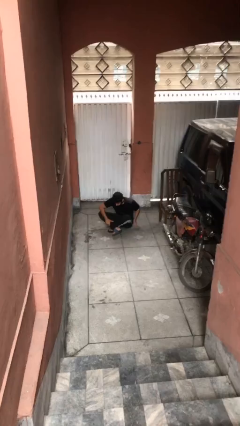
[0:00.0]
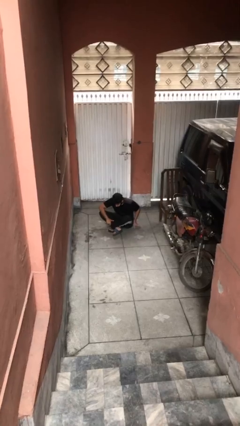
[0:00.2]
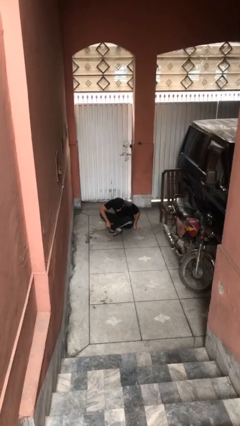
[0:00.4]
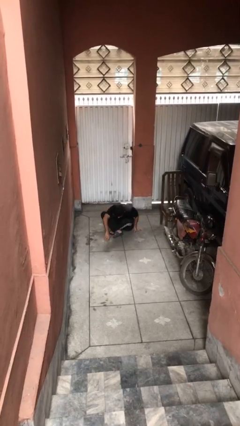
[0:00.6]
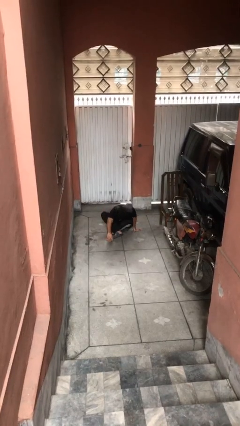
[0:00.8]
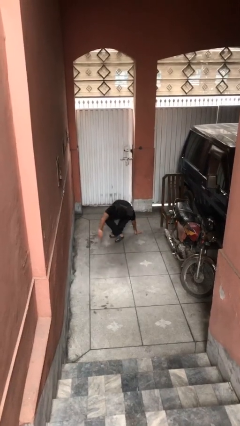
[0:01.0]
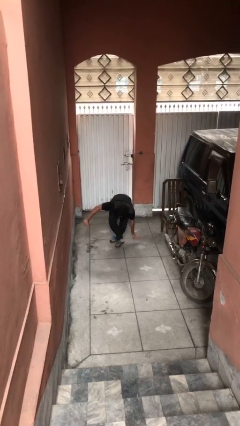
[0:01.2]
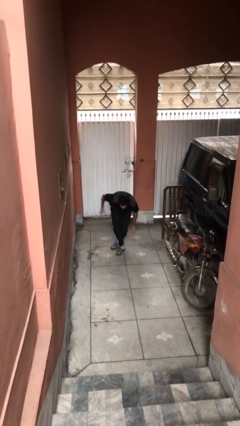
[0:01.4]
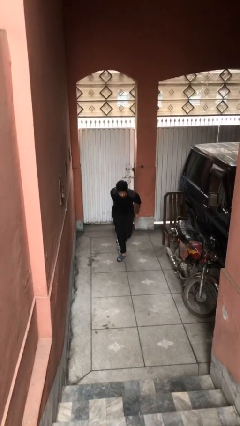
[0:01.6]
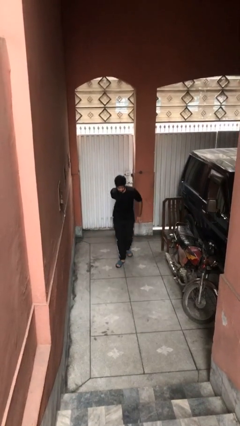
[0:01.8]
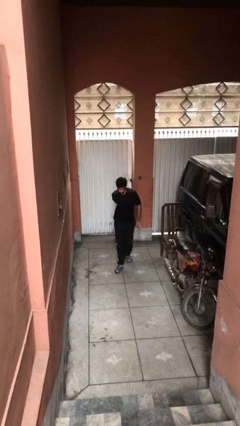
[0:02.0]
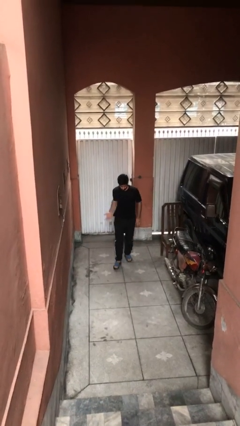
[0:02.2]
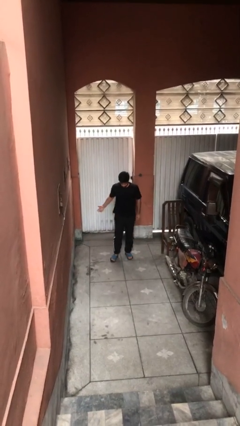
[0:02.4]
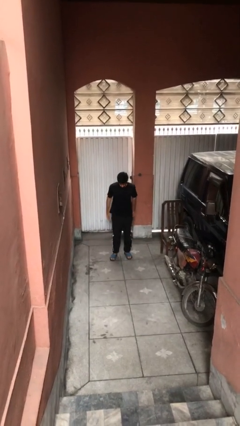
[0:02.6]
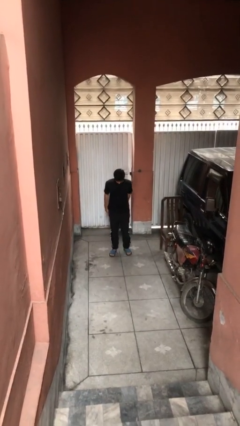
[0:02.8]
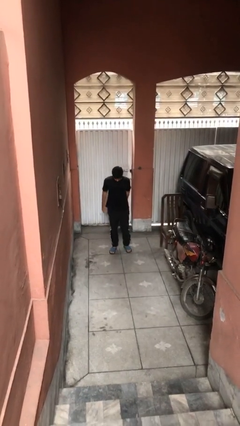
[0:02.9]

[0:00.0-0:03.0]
person stands up

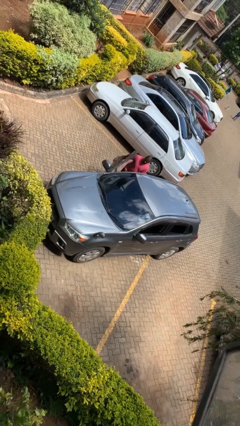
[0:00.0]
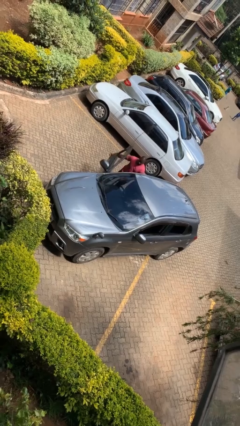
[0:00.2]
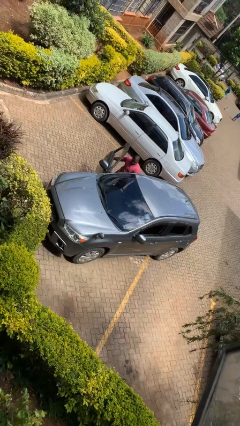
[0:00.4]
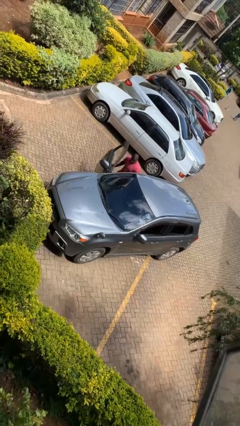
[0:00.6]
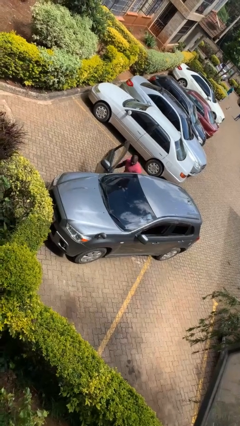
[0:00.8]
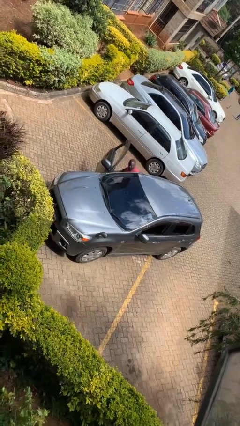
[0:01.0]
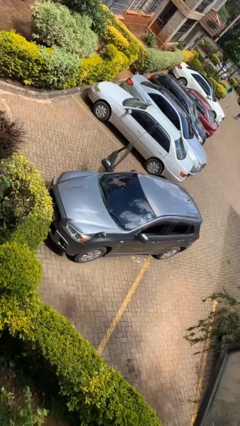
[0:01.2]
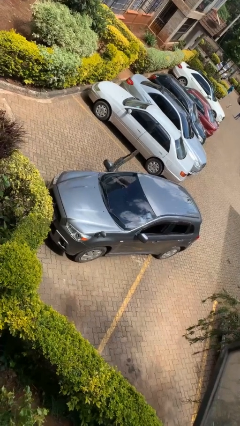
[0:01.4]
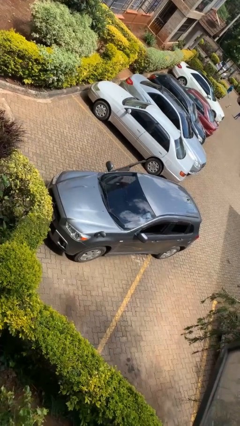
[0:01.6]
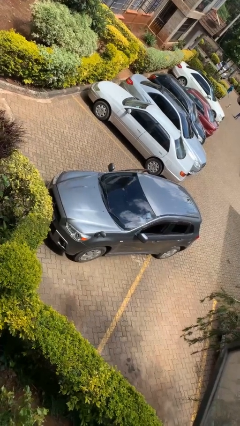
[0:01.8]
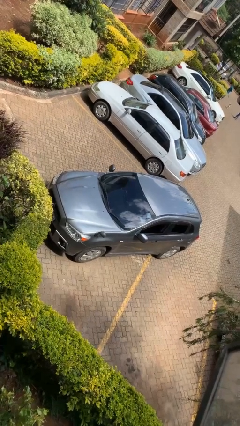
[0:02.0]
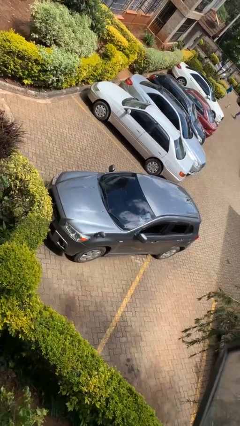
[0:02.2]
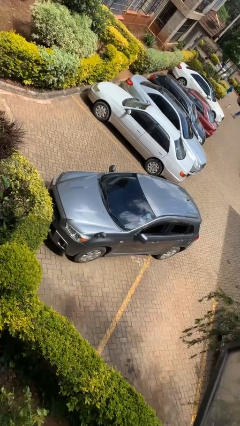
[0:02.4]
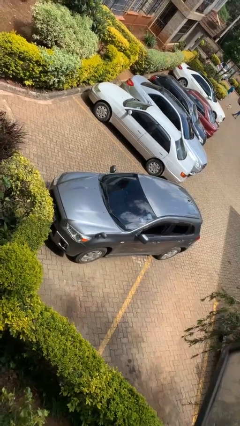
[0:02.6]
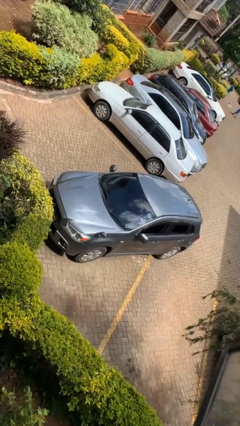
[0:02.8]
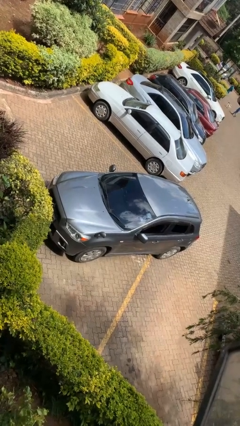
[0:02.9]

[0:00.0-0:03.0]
car picks up person

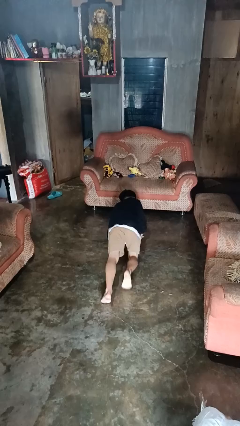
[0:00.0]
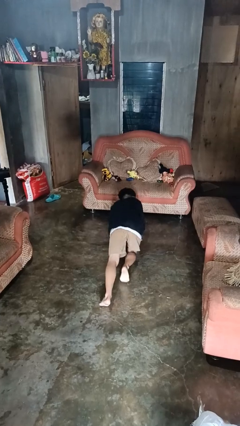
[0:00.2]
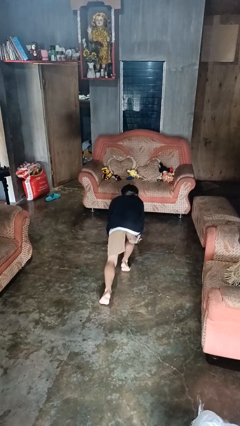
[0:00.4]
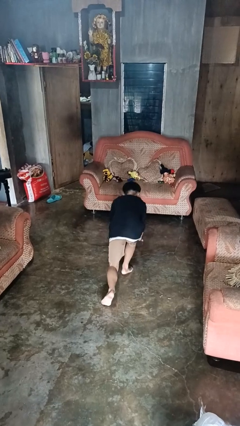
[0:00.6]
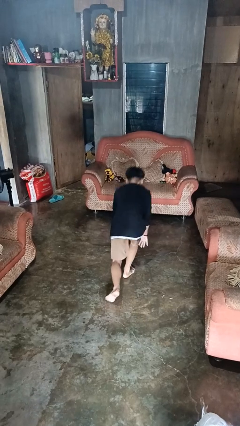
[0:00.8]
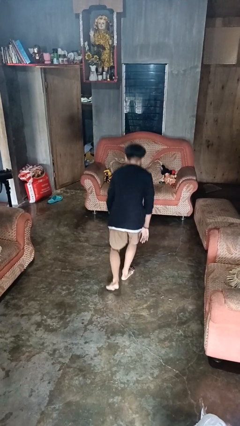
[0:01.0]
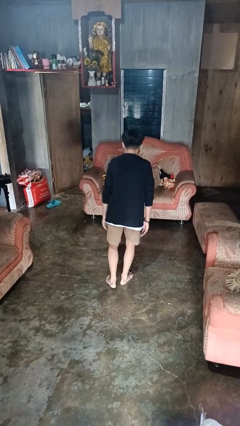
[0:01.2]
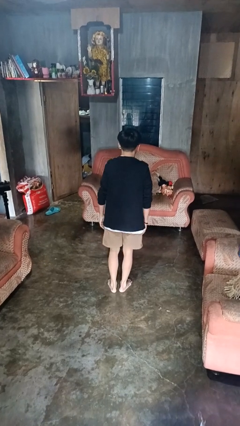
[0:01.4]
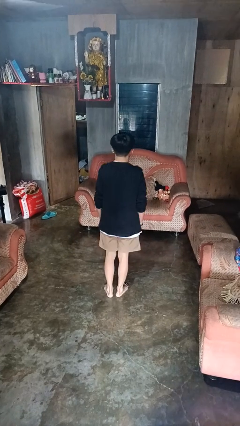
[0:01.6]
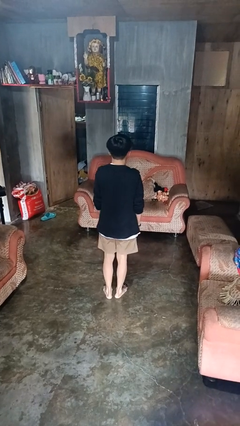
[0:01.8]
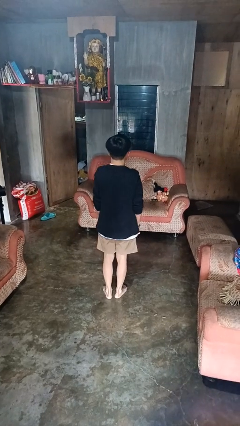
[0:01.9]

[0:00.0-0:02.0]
person stands up from floor

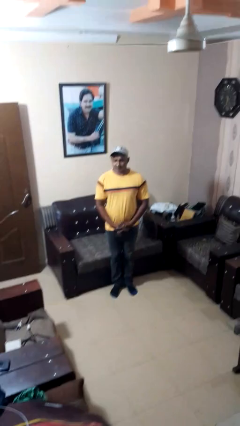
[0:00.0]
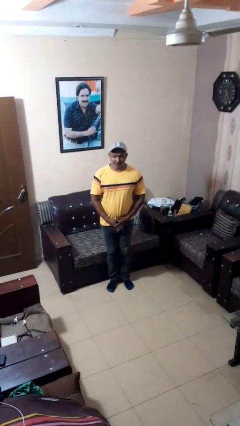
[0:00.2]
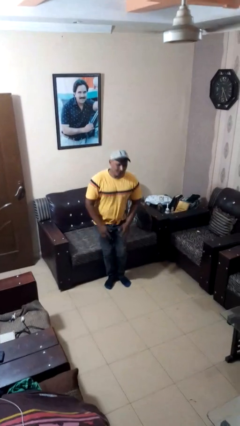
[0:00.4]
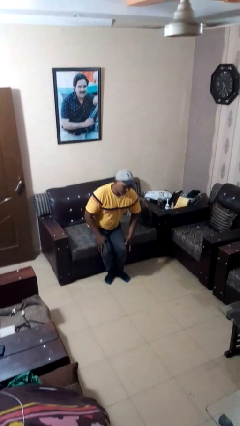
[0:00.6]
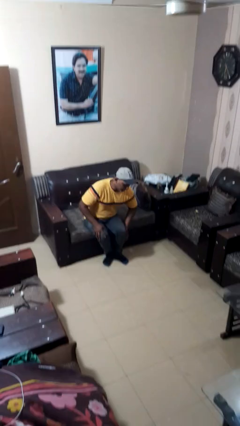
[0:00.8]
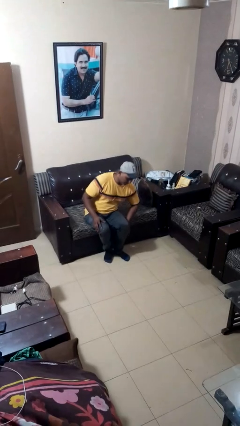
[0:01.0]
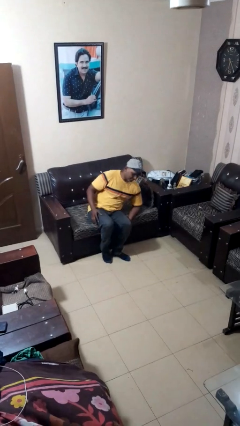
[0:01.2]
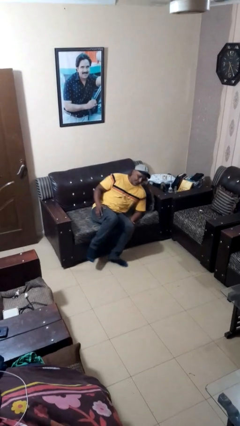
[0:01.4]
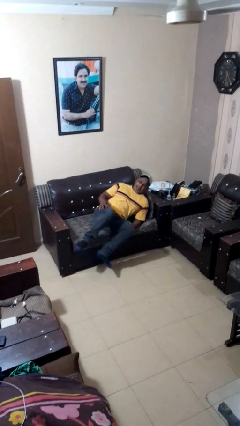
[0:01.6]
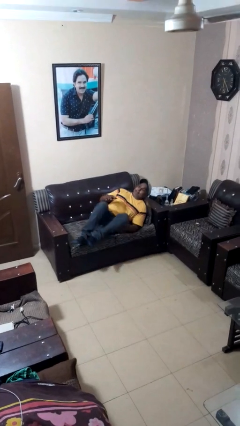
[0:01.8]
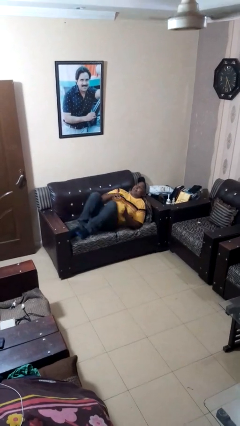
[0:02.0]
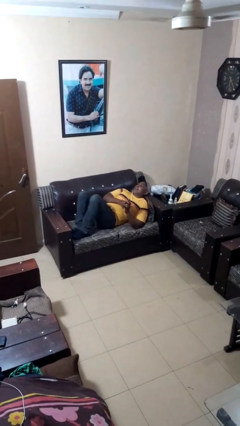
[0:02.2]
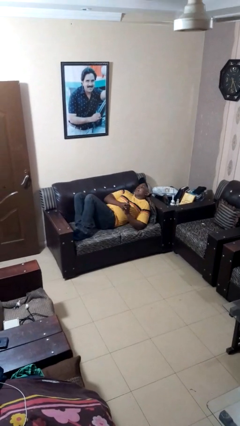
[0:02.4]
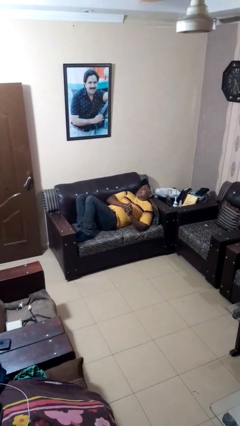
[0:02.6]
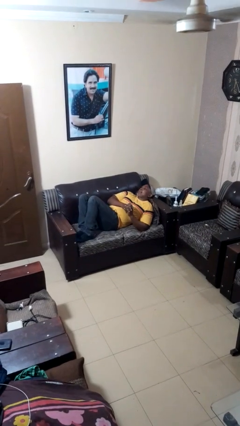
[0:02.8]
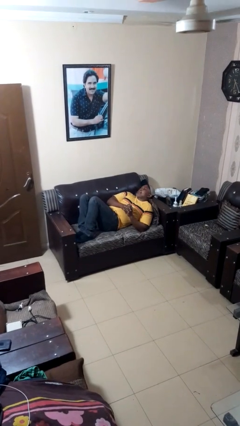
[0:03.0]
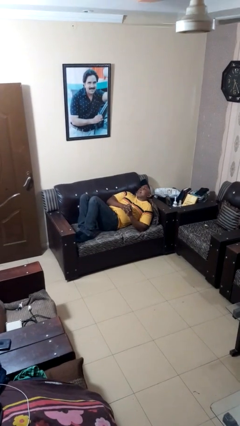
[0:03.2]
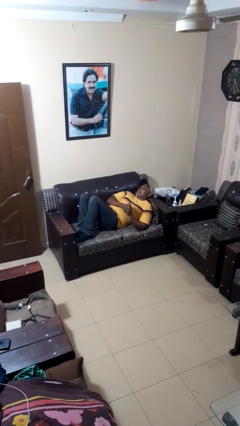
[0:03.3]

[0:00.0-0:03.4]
person lies down on couch

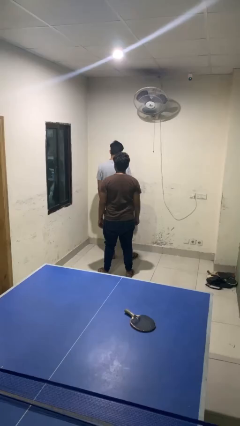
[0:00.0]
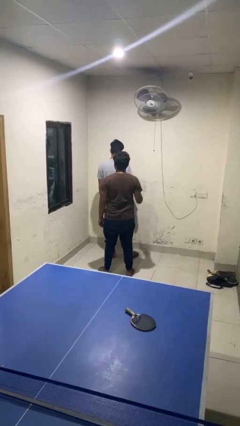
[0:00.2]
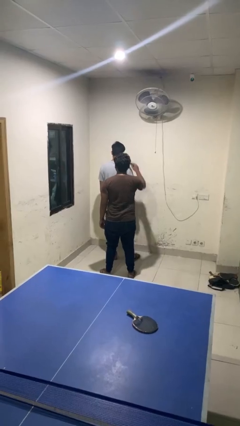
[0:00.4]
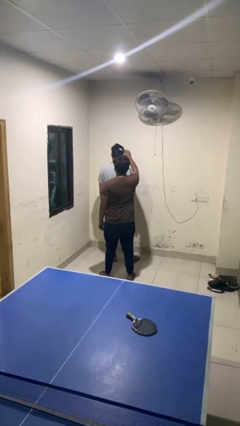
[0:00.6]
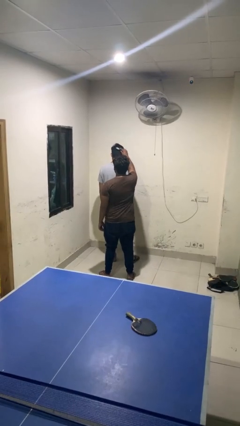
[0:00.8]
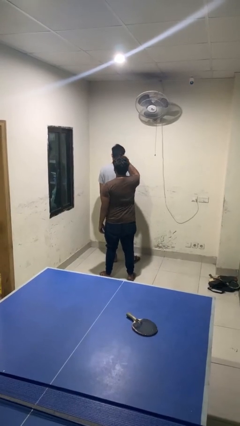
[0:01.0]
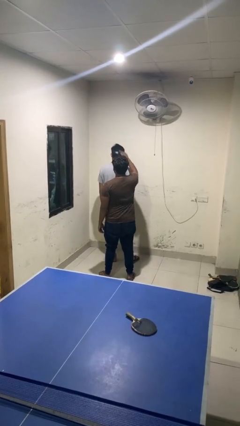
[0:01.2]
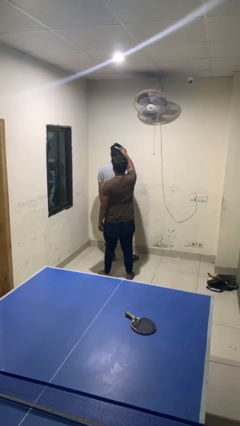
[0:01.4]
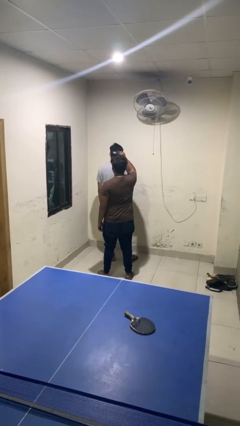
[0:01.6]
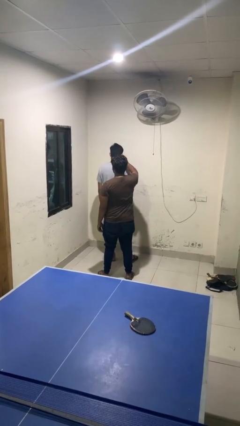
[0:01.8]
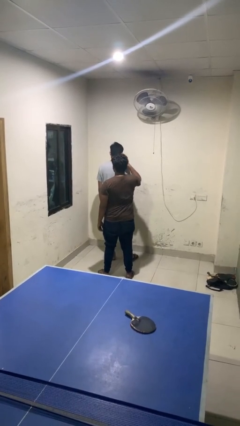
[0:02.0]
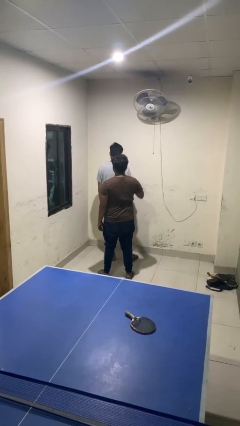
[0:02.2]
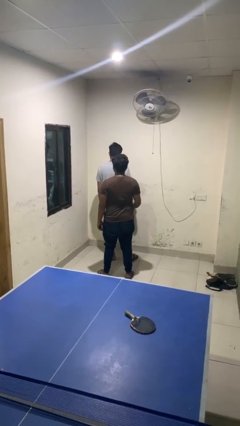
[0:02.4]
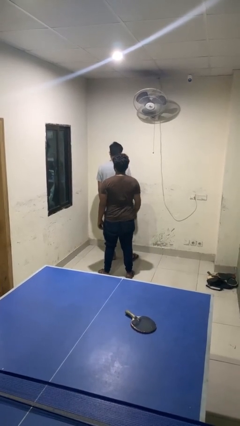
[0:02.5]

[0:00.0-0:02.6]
person brushes hair of person

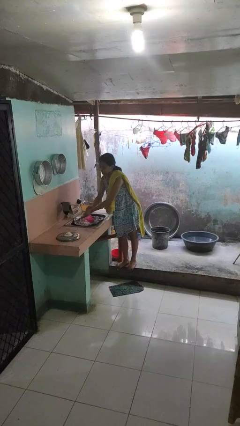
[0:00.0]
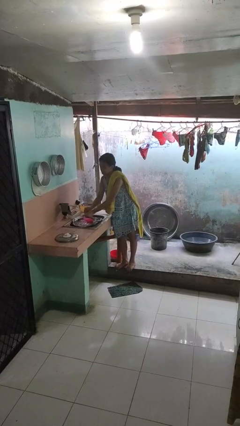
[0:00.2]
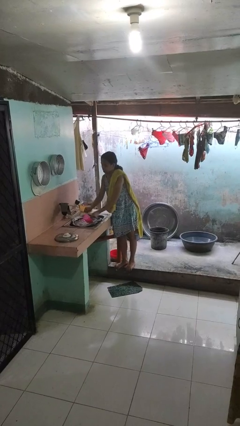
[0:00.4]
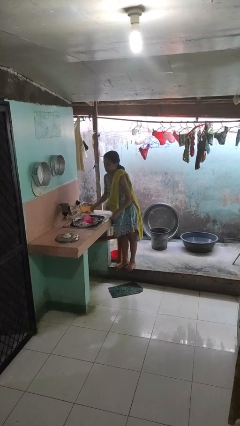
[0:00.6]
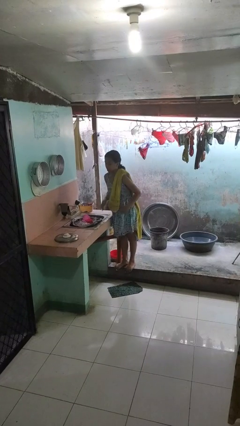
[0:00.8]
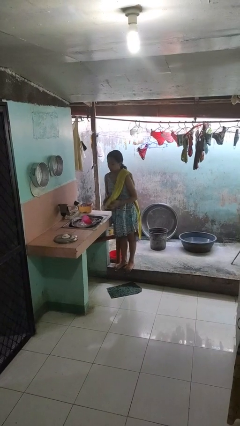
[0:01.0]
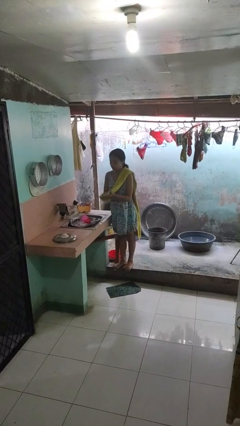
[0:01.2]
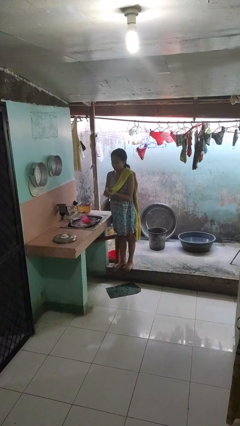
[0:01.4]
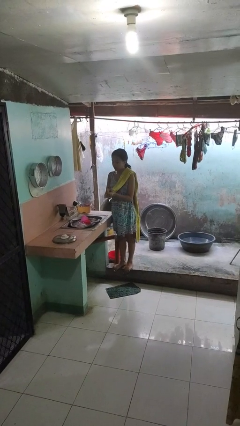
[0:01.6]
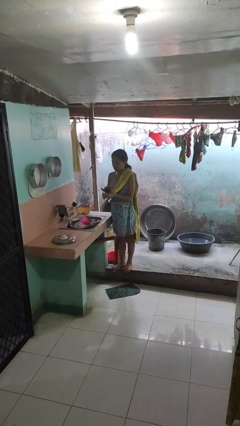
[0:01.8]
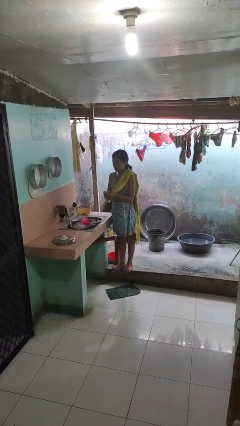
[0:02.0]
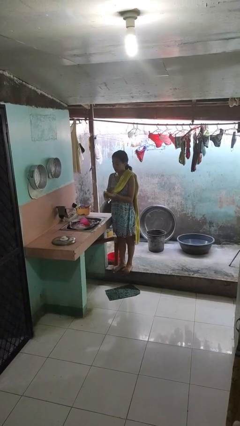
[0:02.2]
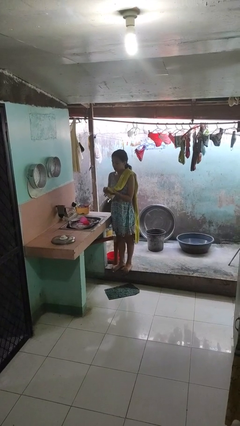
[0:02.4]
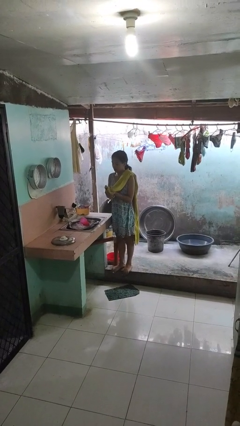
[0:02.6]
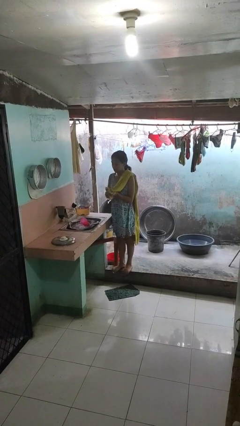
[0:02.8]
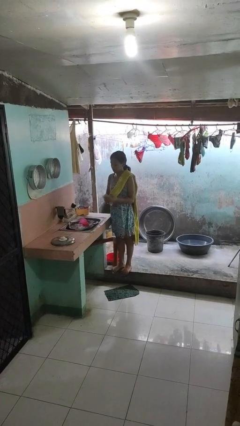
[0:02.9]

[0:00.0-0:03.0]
person dries hands with towel

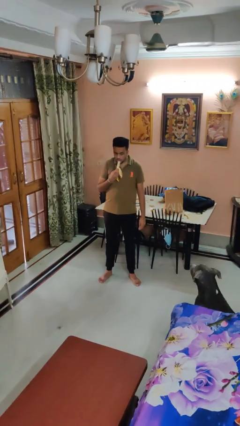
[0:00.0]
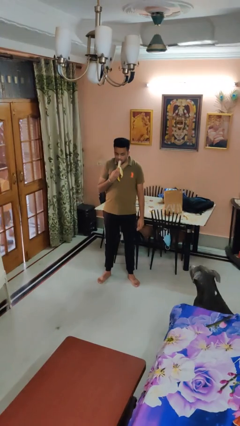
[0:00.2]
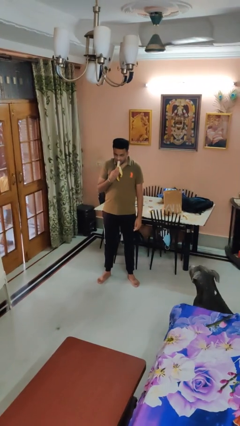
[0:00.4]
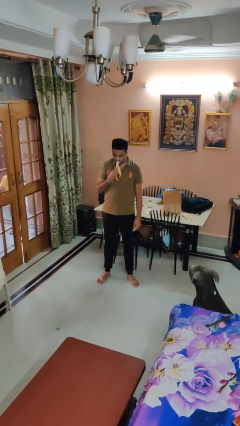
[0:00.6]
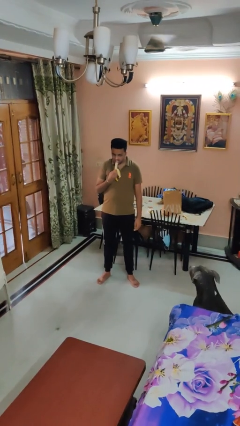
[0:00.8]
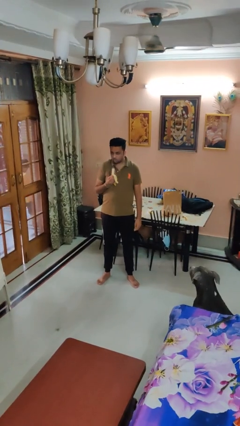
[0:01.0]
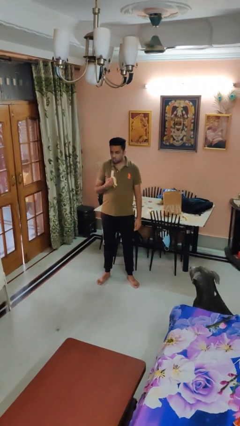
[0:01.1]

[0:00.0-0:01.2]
person eats banana
